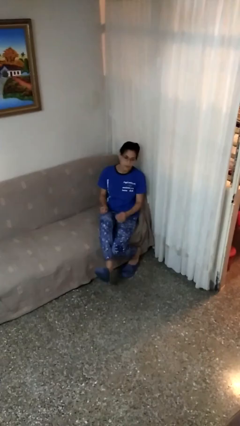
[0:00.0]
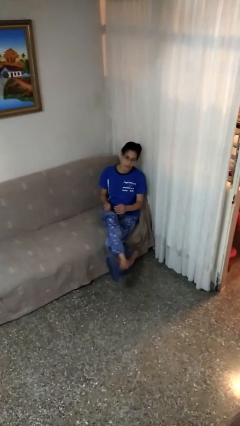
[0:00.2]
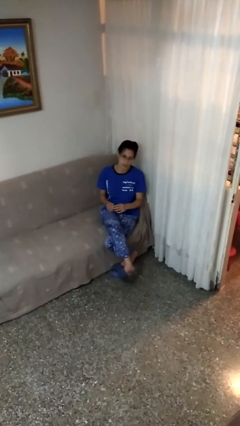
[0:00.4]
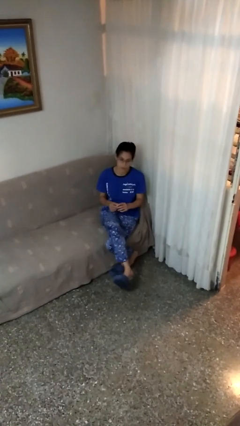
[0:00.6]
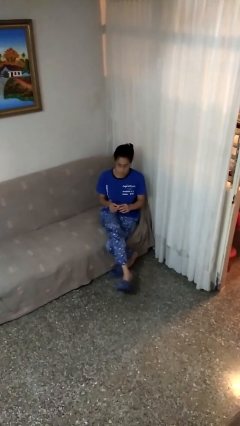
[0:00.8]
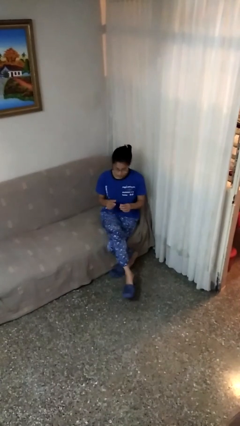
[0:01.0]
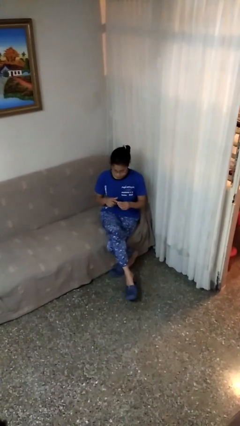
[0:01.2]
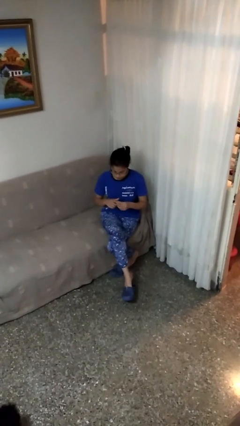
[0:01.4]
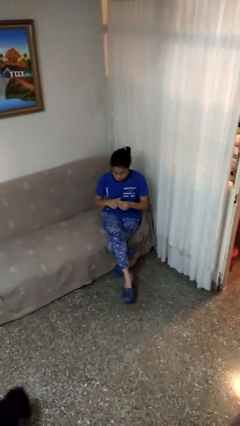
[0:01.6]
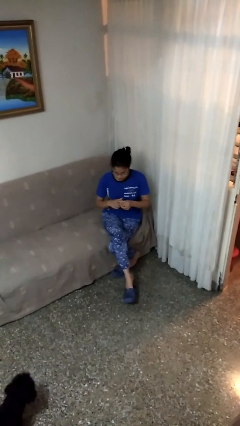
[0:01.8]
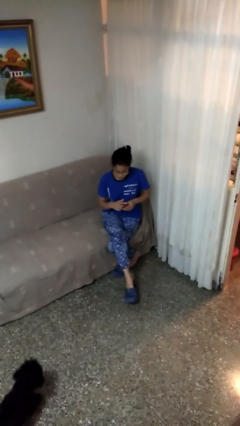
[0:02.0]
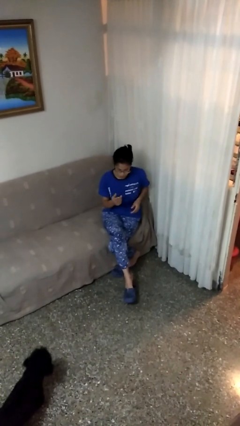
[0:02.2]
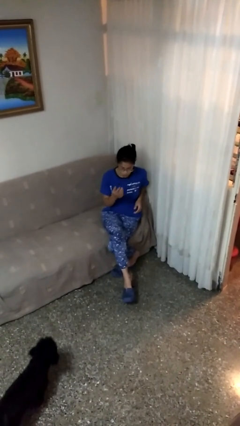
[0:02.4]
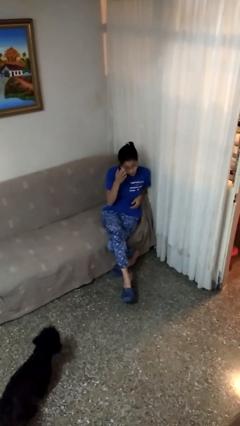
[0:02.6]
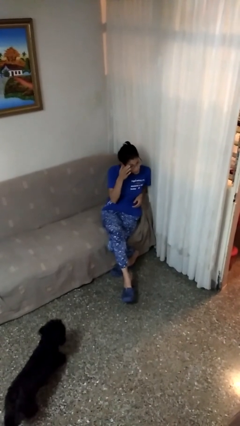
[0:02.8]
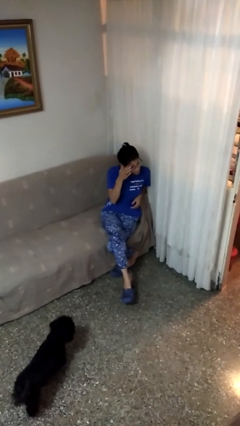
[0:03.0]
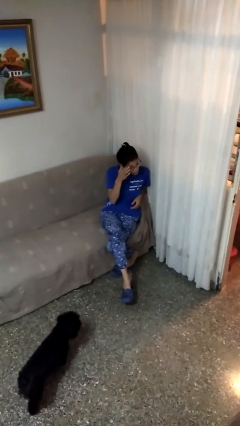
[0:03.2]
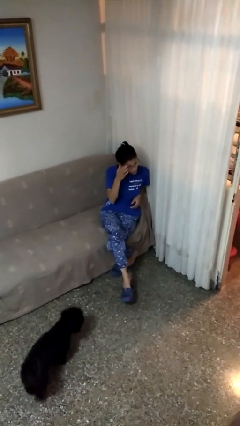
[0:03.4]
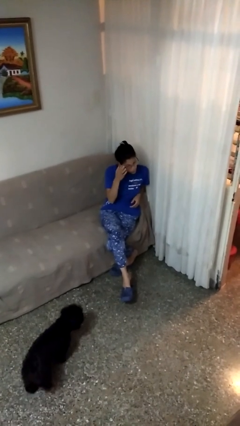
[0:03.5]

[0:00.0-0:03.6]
person puts on ring

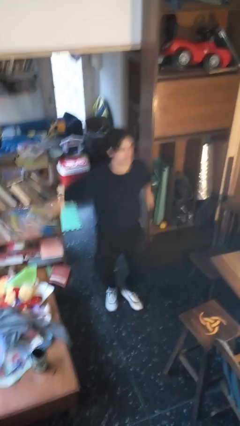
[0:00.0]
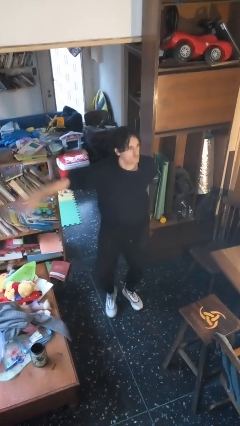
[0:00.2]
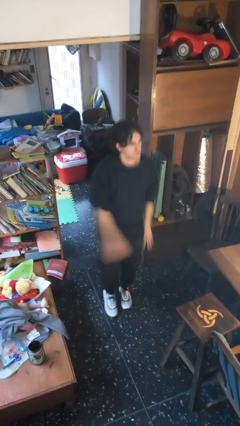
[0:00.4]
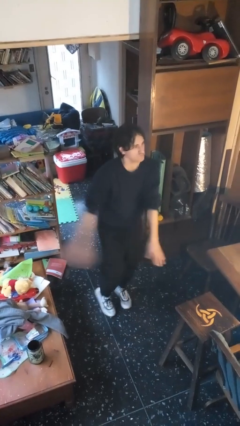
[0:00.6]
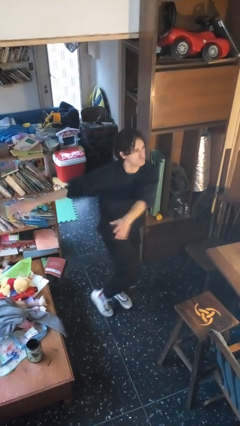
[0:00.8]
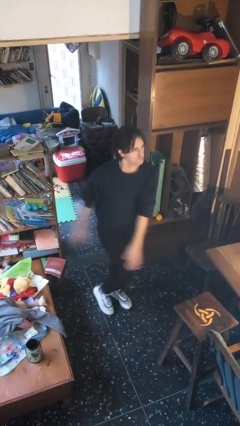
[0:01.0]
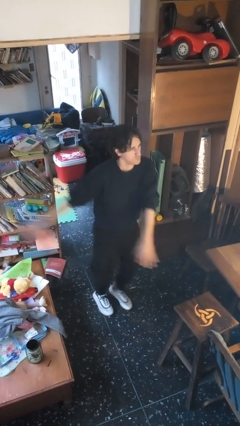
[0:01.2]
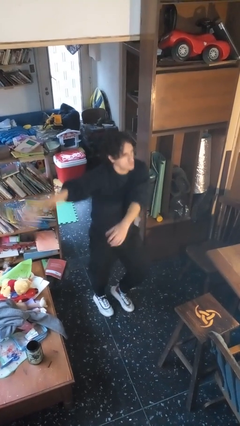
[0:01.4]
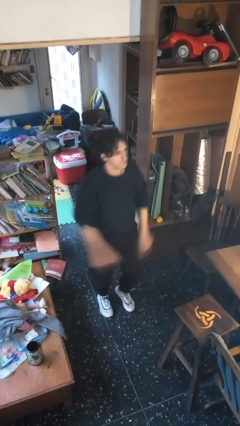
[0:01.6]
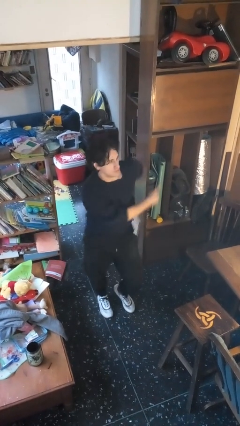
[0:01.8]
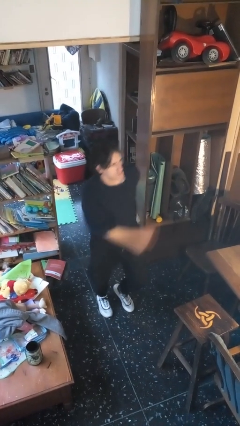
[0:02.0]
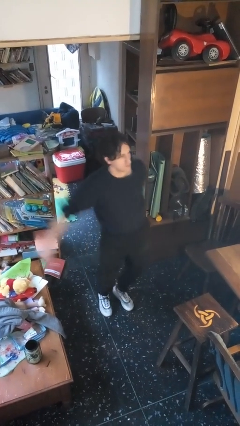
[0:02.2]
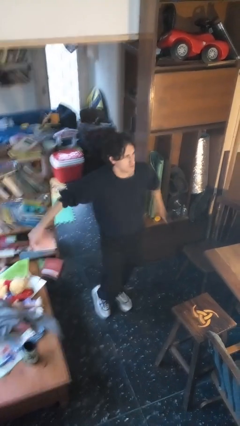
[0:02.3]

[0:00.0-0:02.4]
person dances in place

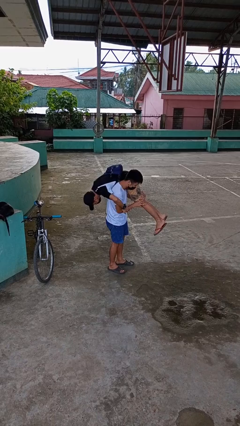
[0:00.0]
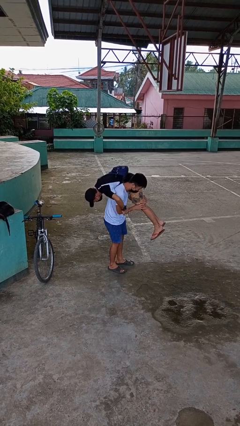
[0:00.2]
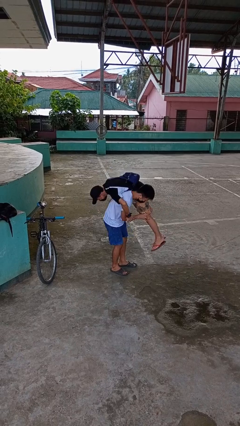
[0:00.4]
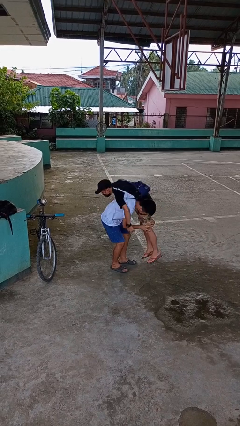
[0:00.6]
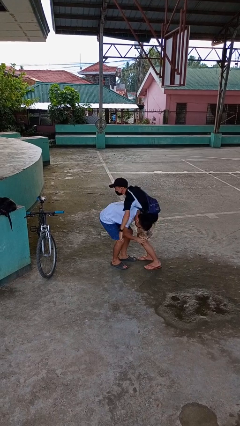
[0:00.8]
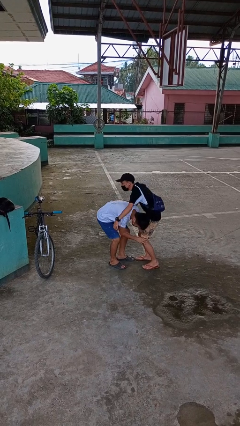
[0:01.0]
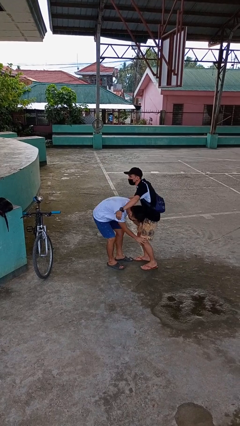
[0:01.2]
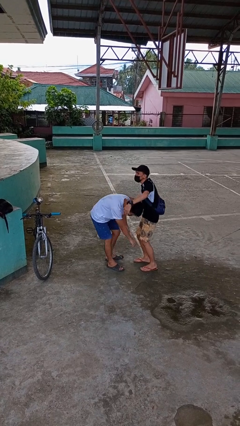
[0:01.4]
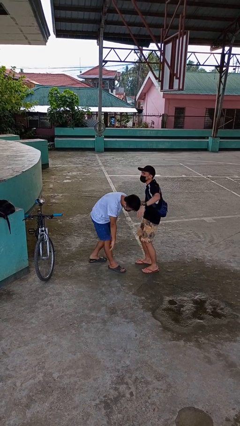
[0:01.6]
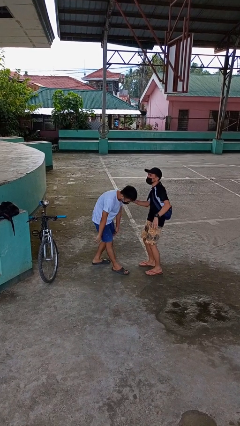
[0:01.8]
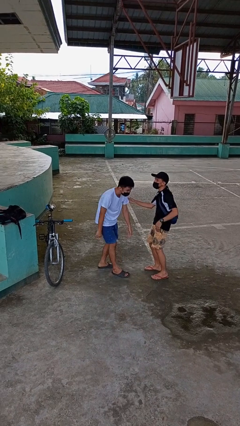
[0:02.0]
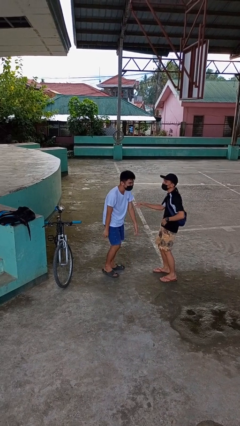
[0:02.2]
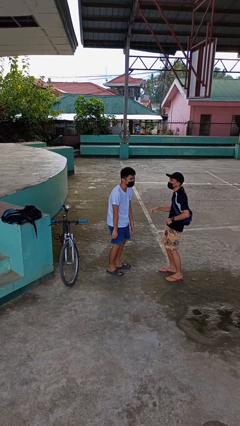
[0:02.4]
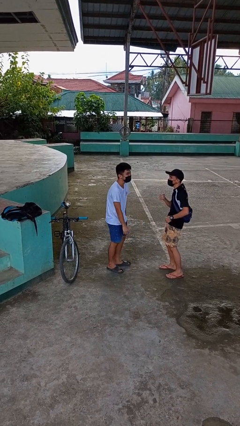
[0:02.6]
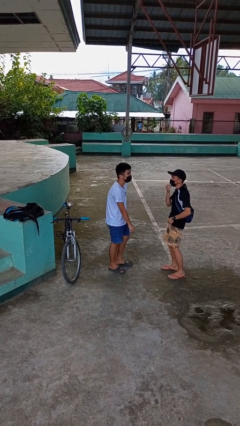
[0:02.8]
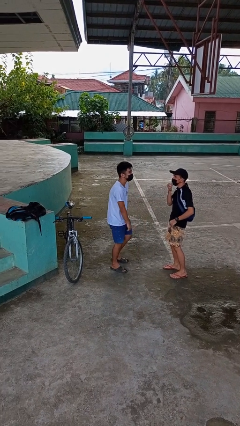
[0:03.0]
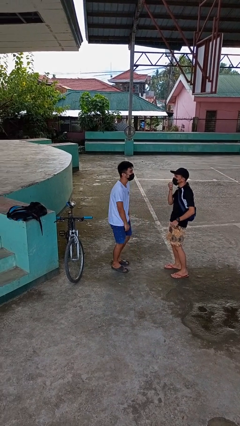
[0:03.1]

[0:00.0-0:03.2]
person puts down person

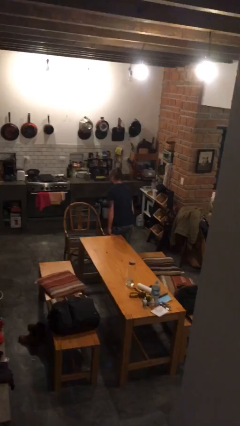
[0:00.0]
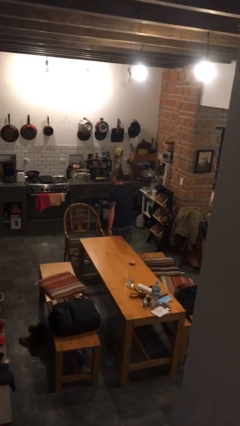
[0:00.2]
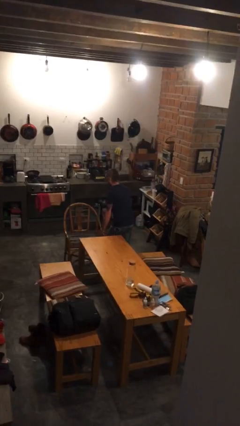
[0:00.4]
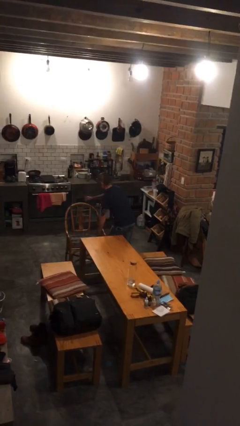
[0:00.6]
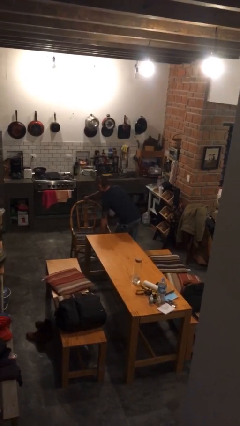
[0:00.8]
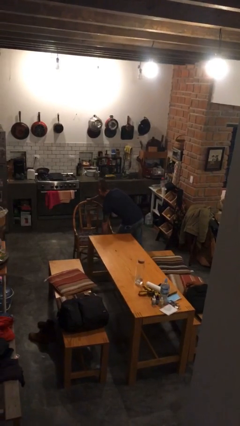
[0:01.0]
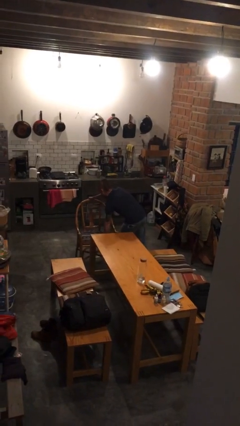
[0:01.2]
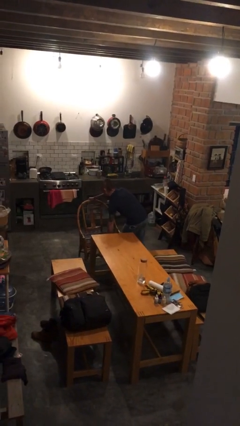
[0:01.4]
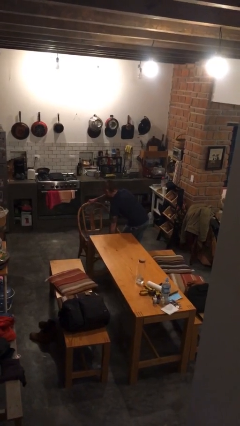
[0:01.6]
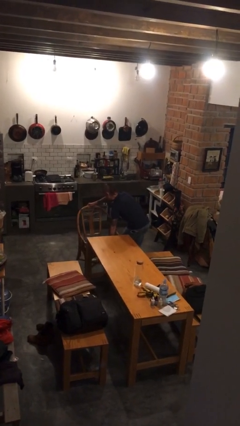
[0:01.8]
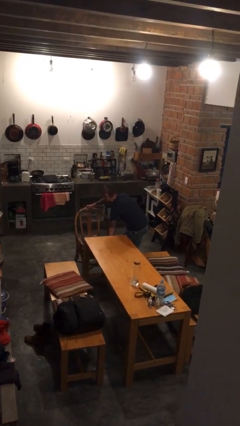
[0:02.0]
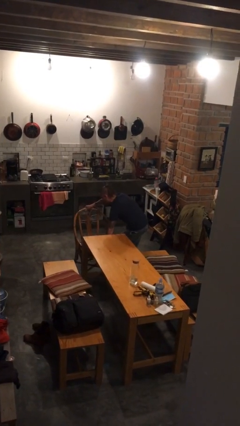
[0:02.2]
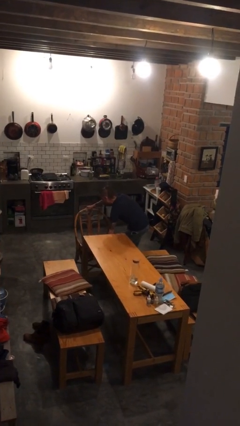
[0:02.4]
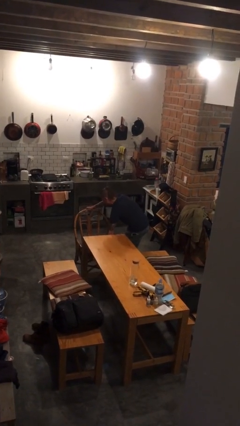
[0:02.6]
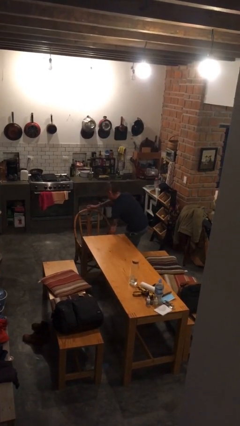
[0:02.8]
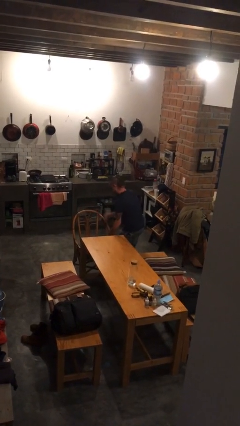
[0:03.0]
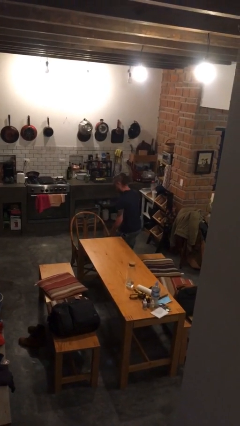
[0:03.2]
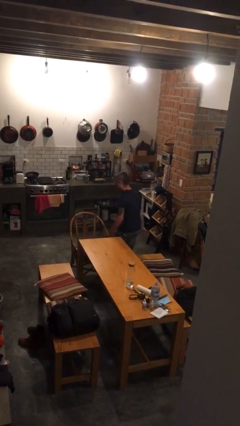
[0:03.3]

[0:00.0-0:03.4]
person pushes in chair

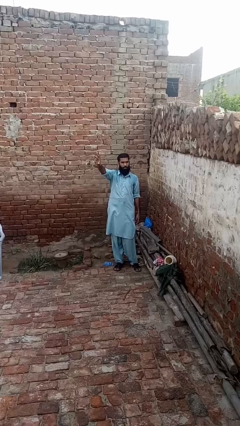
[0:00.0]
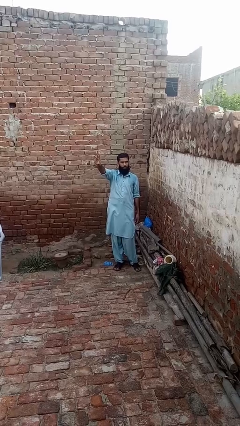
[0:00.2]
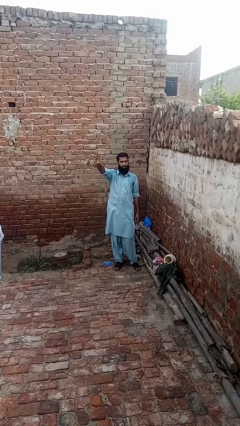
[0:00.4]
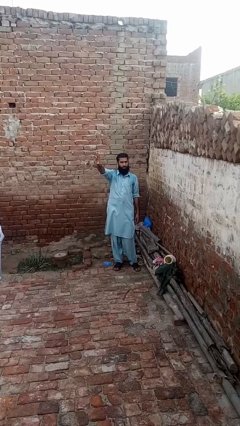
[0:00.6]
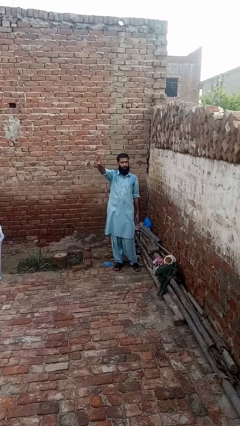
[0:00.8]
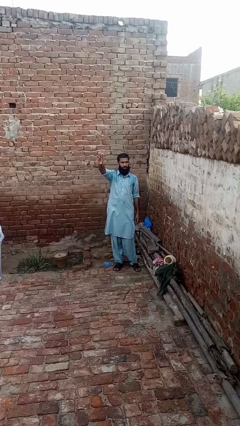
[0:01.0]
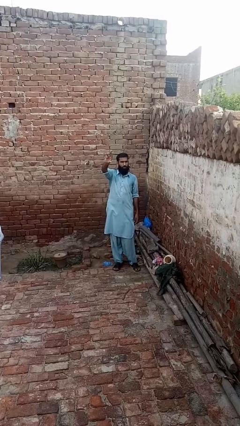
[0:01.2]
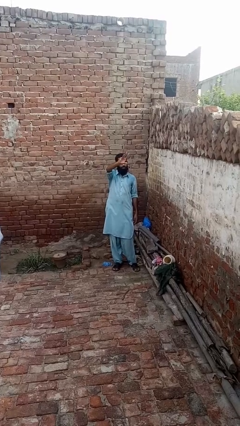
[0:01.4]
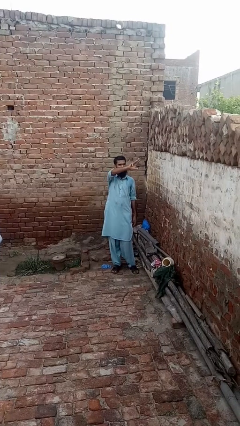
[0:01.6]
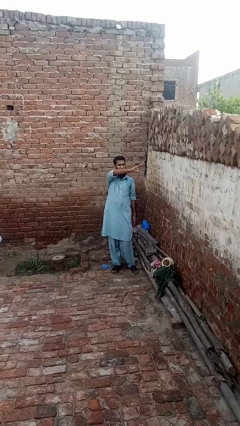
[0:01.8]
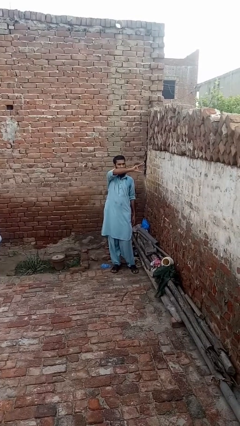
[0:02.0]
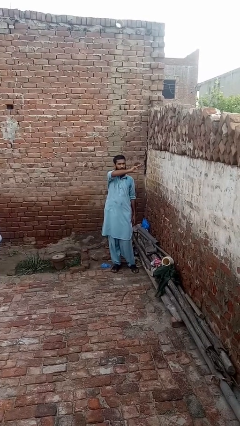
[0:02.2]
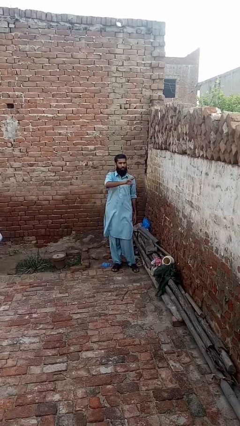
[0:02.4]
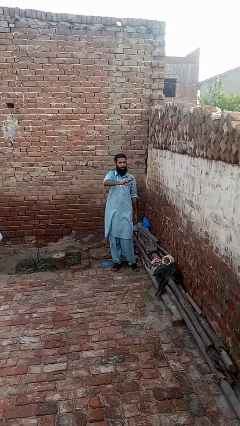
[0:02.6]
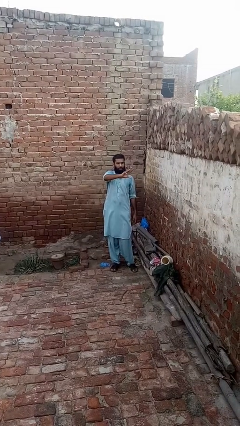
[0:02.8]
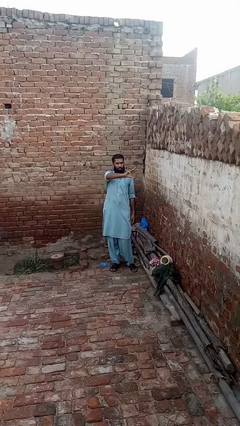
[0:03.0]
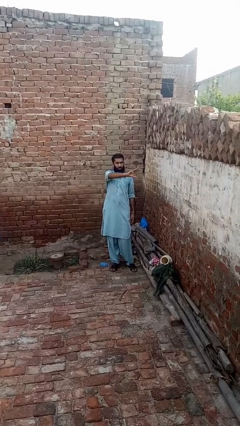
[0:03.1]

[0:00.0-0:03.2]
person gestures swipe left

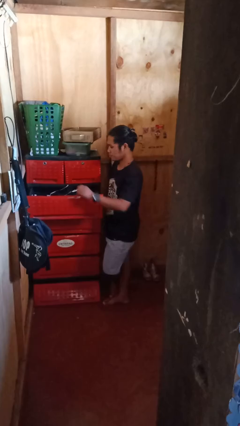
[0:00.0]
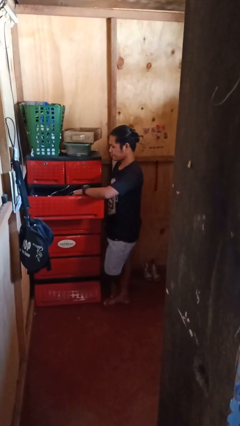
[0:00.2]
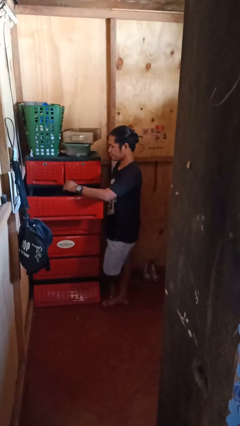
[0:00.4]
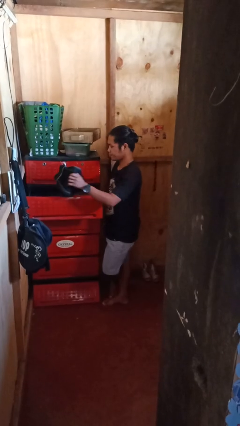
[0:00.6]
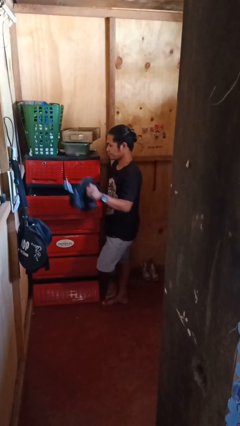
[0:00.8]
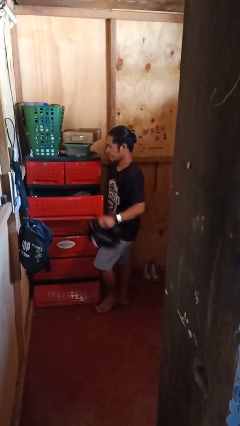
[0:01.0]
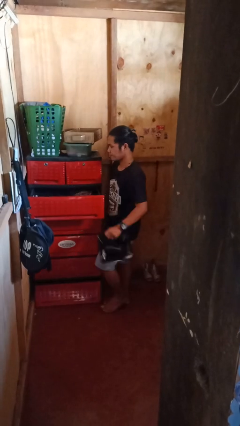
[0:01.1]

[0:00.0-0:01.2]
person takes clothes from dresser

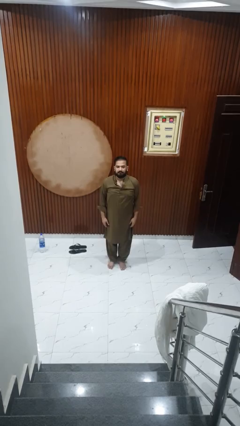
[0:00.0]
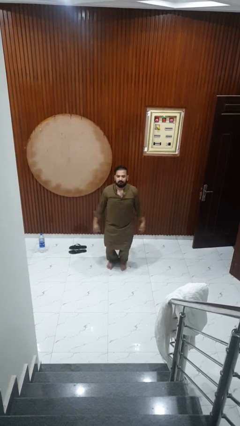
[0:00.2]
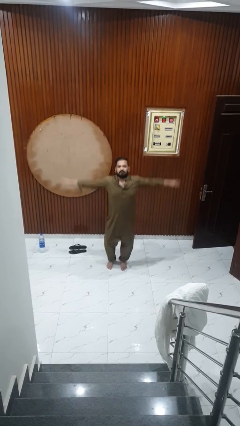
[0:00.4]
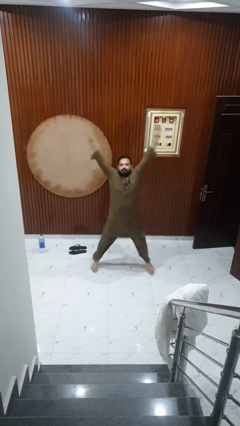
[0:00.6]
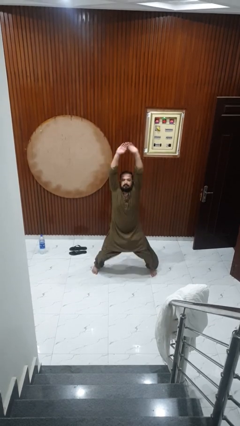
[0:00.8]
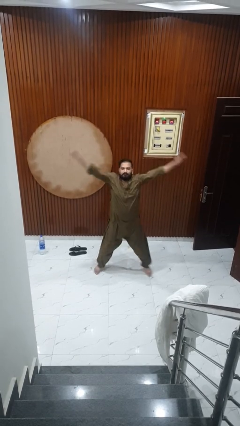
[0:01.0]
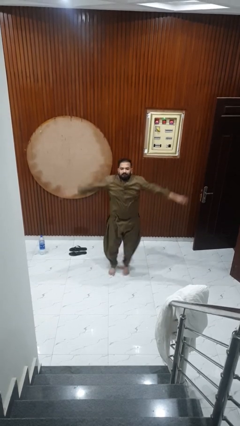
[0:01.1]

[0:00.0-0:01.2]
person exercises with jumping jacks
